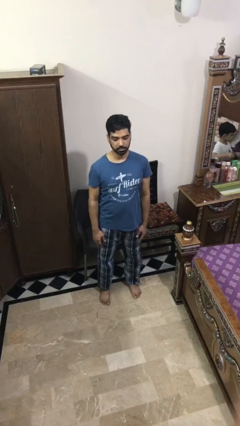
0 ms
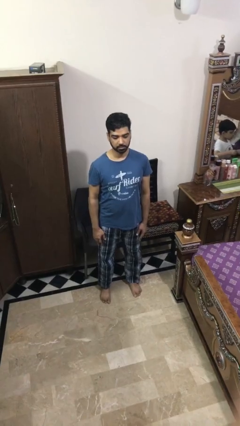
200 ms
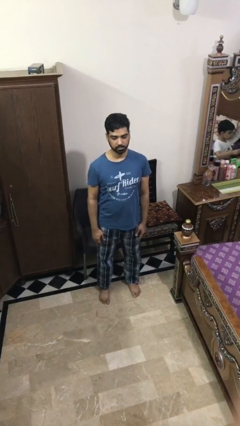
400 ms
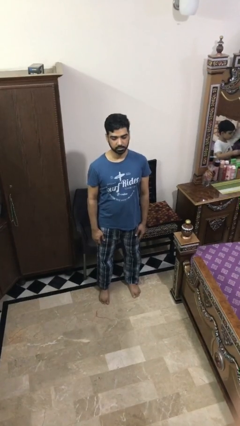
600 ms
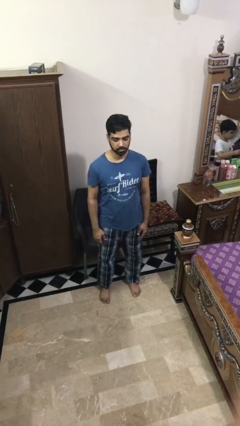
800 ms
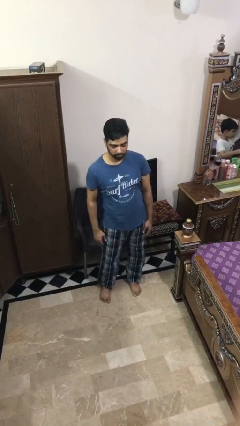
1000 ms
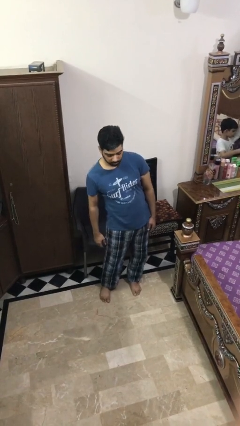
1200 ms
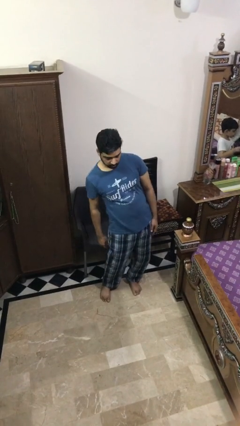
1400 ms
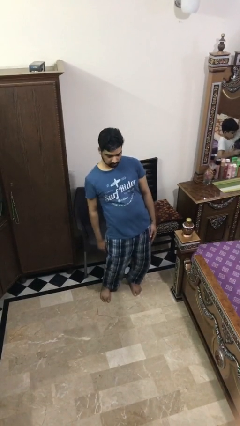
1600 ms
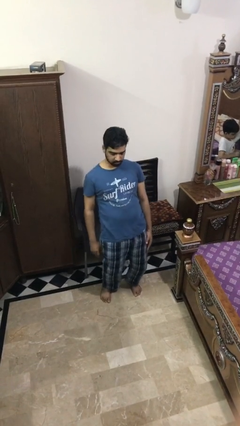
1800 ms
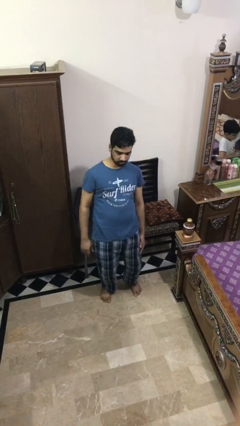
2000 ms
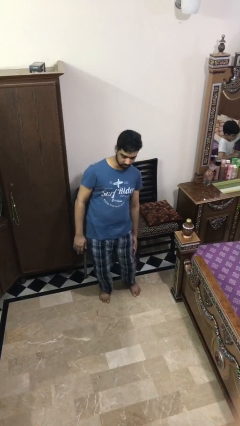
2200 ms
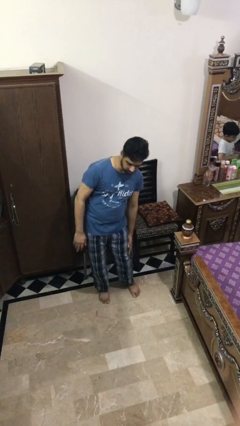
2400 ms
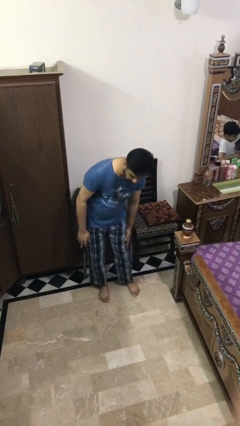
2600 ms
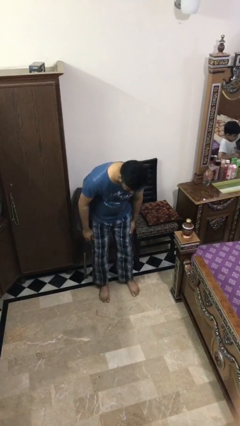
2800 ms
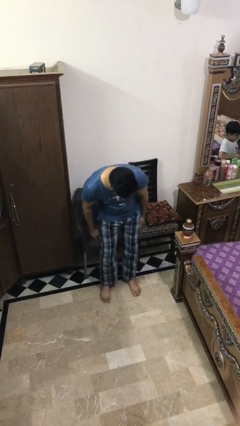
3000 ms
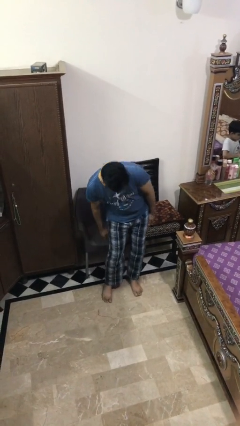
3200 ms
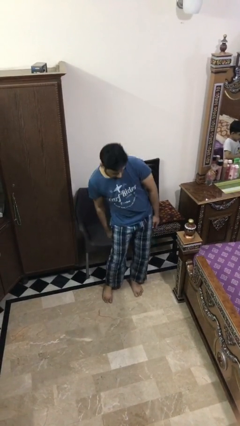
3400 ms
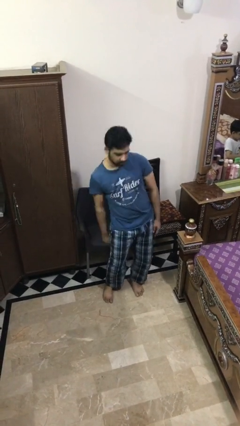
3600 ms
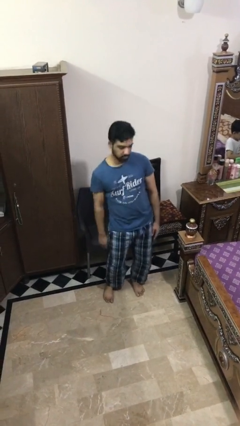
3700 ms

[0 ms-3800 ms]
person wiggles hips

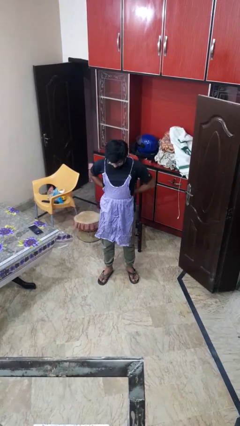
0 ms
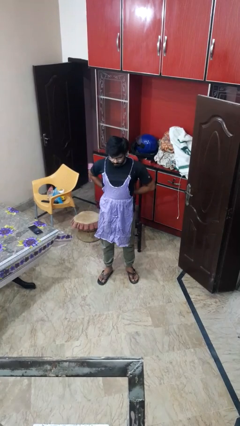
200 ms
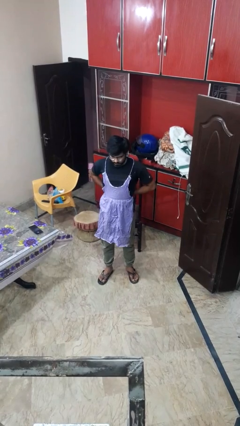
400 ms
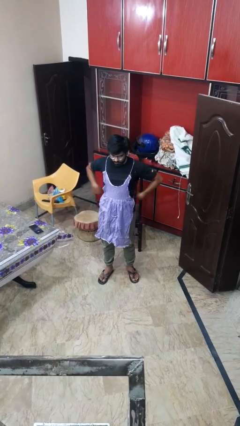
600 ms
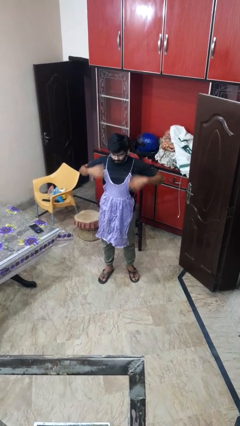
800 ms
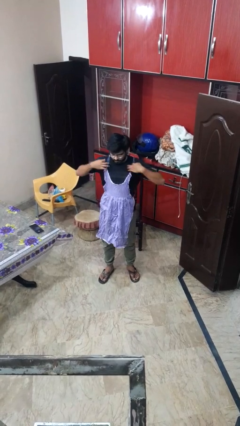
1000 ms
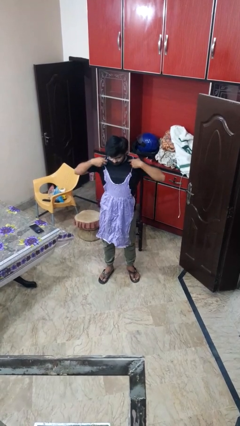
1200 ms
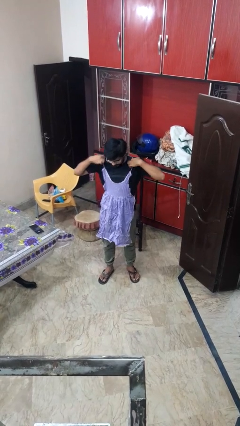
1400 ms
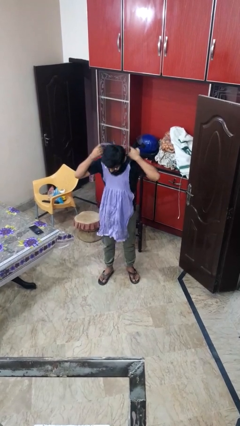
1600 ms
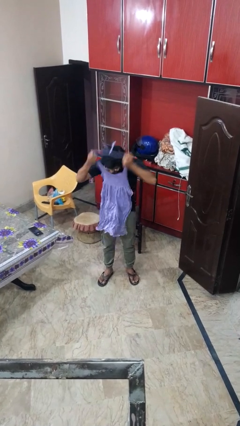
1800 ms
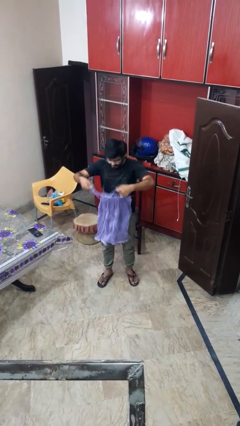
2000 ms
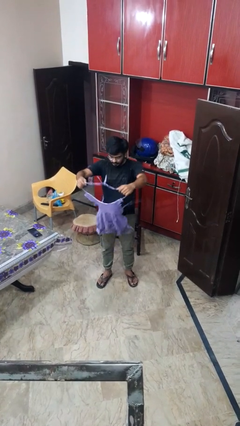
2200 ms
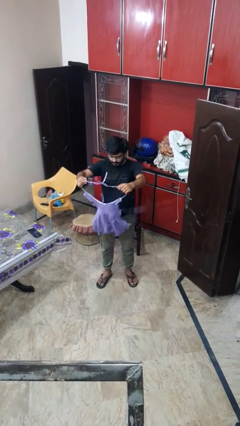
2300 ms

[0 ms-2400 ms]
person takes off apron

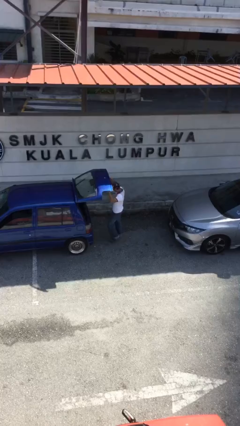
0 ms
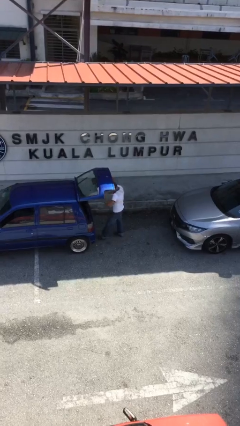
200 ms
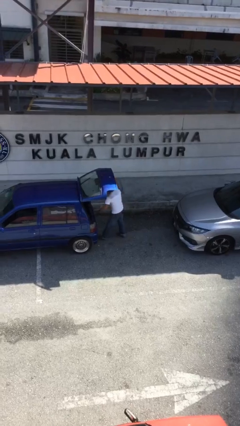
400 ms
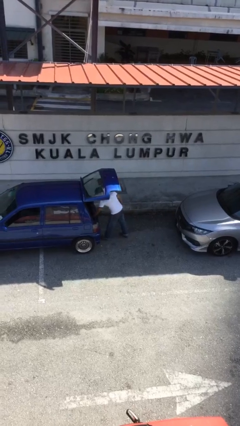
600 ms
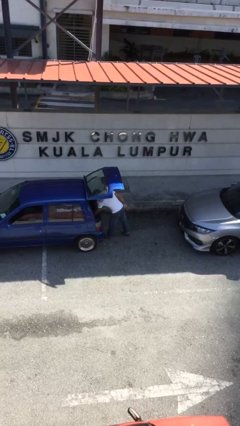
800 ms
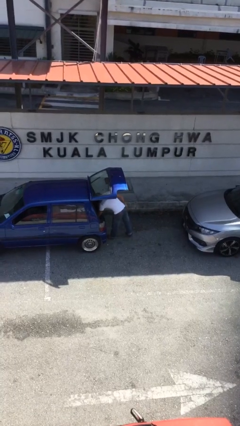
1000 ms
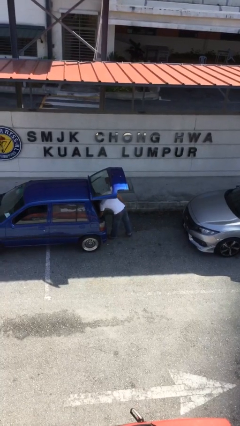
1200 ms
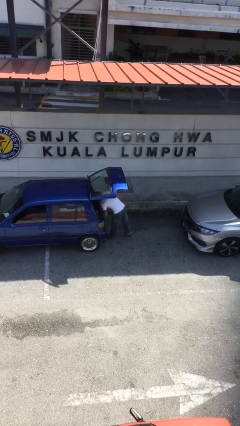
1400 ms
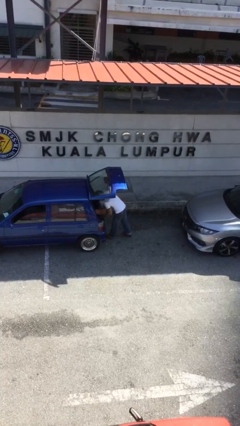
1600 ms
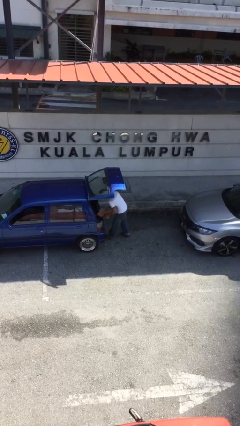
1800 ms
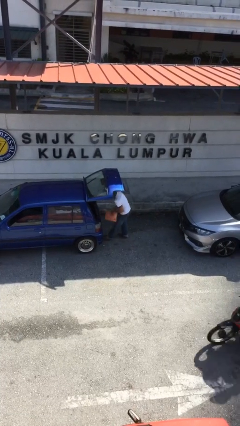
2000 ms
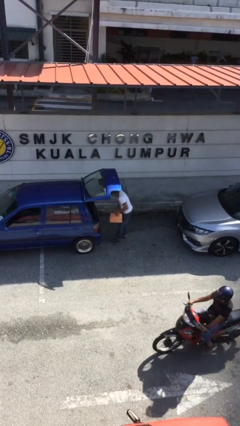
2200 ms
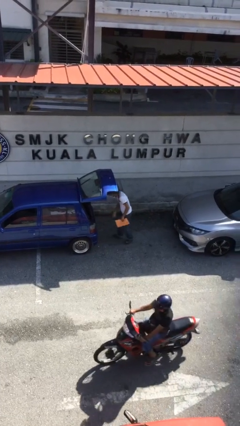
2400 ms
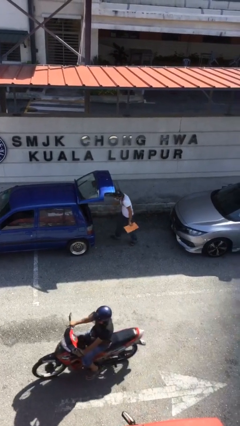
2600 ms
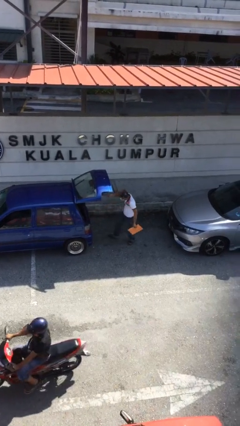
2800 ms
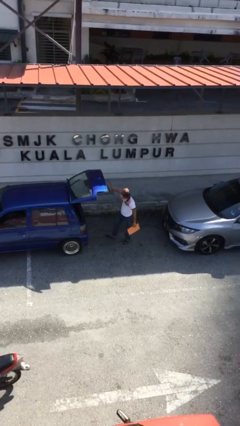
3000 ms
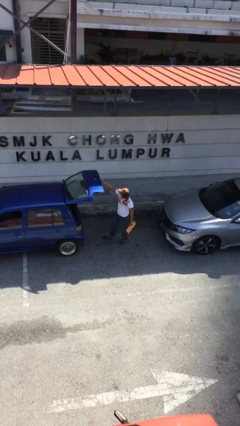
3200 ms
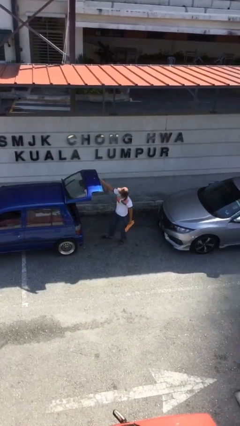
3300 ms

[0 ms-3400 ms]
person unloads car

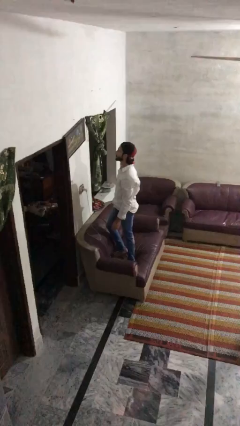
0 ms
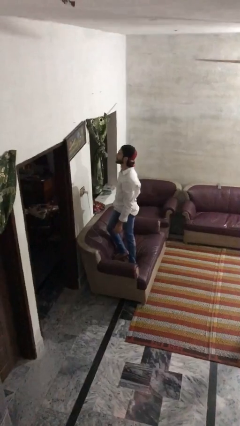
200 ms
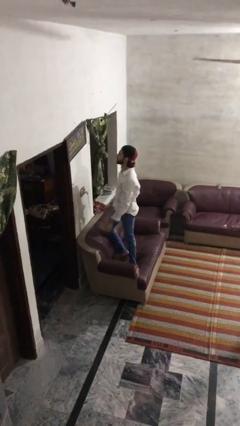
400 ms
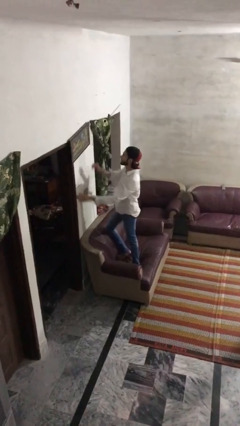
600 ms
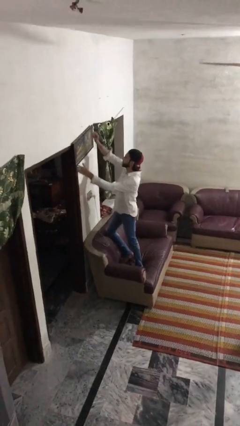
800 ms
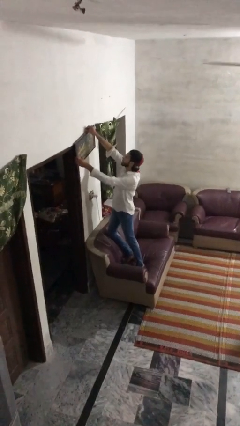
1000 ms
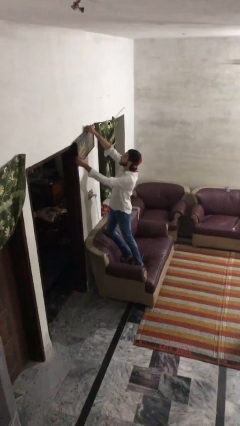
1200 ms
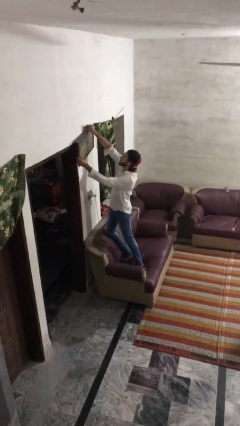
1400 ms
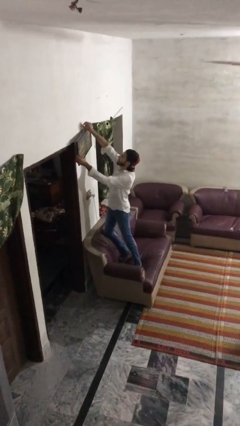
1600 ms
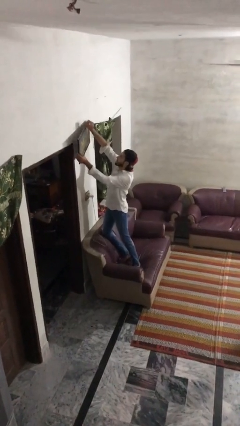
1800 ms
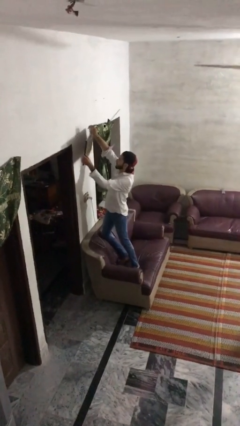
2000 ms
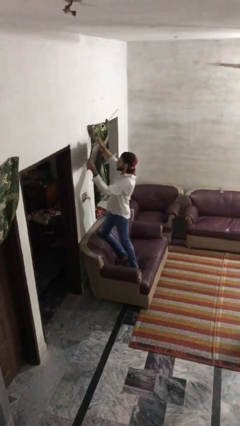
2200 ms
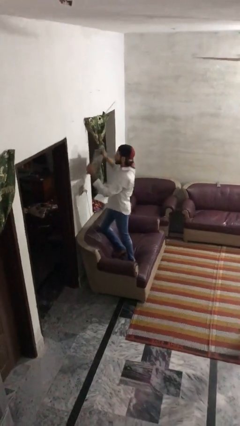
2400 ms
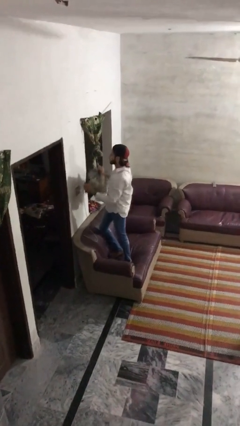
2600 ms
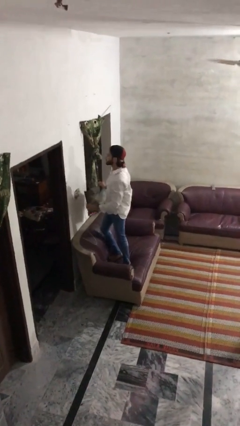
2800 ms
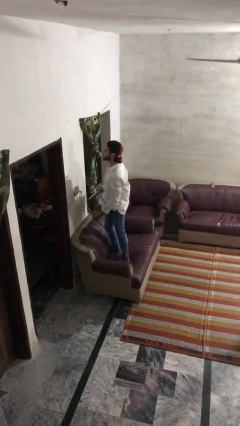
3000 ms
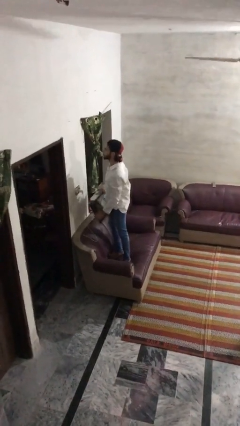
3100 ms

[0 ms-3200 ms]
person takes down picture frame

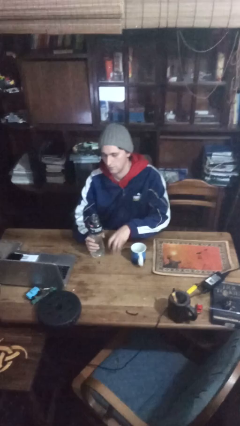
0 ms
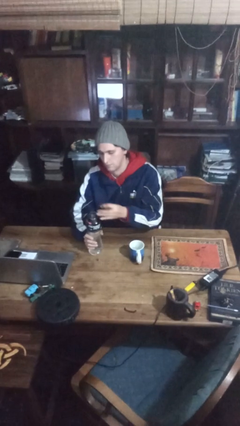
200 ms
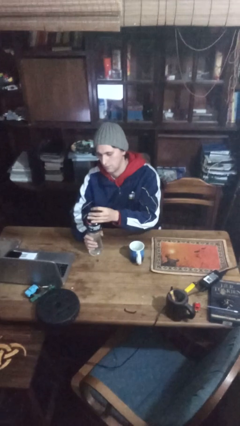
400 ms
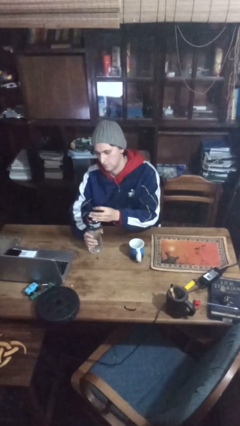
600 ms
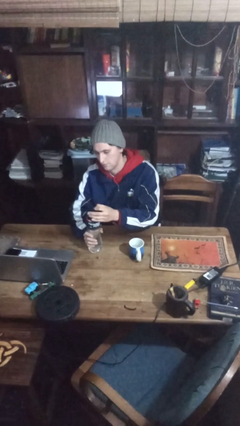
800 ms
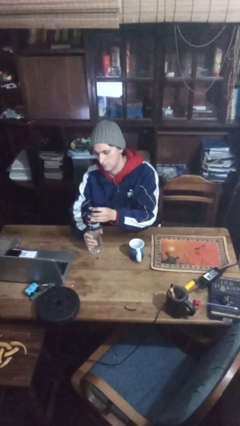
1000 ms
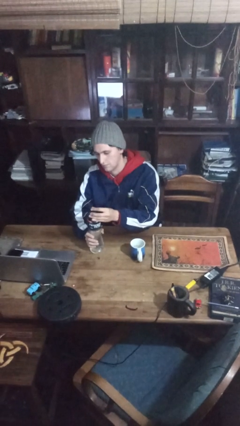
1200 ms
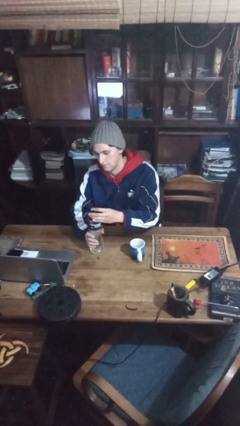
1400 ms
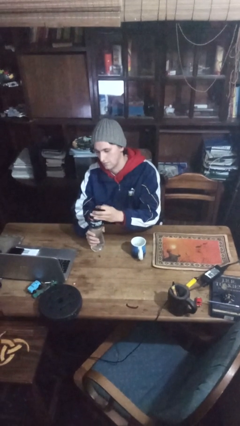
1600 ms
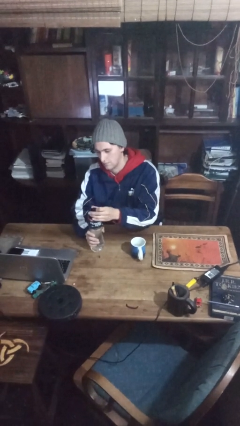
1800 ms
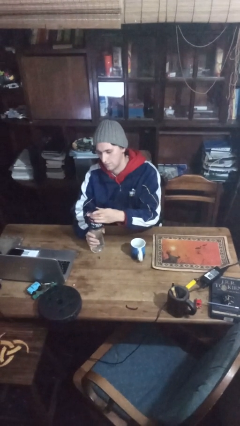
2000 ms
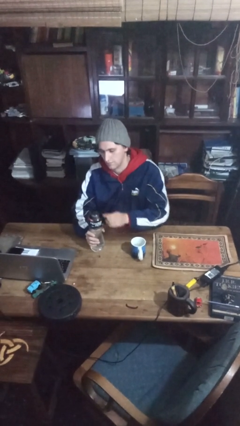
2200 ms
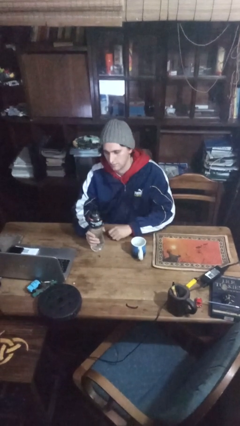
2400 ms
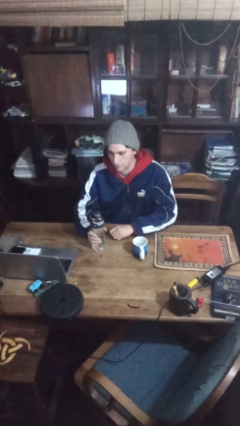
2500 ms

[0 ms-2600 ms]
person screws lid to bottle

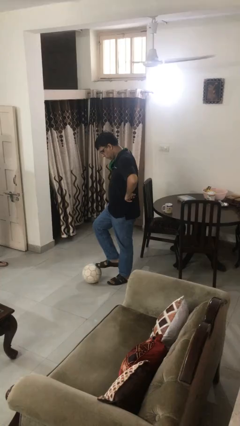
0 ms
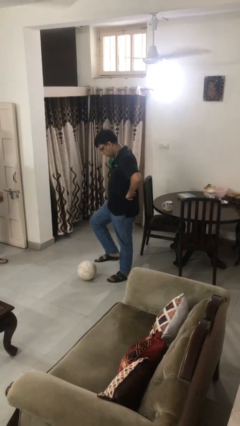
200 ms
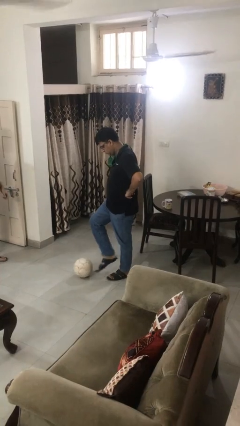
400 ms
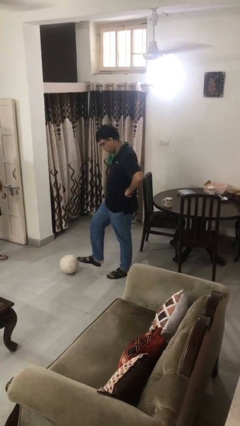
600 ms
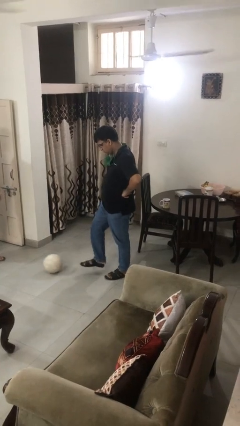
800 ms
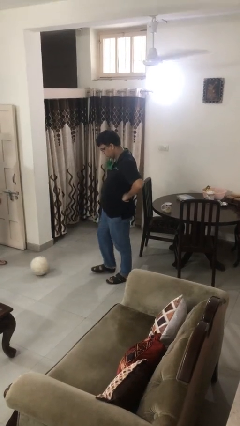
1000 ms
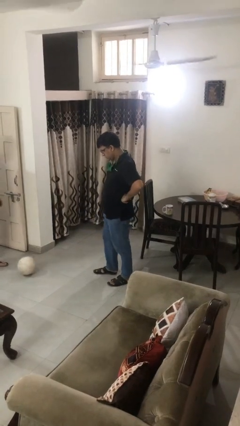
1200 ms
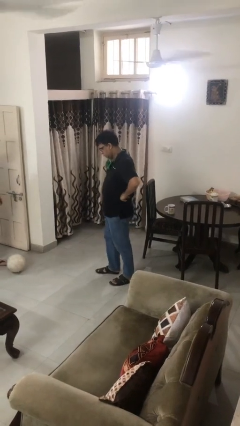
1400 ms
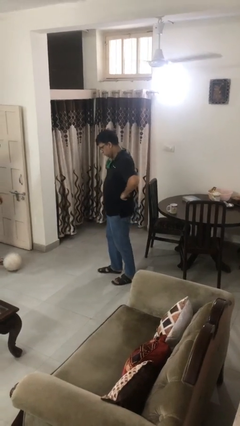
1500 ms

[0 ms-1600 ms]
person kicks object to person

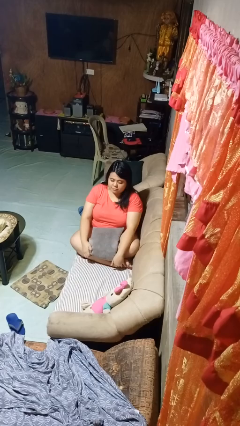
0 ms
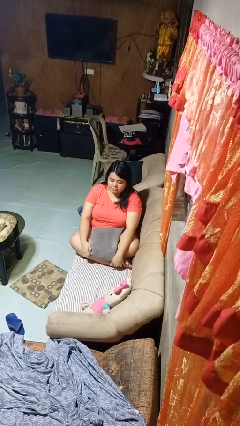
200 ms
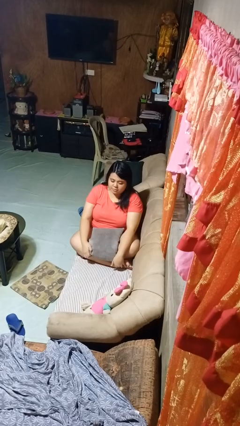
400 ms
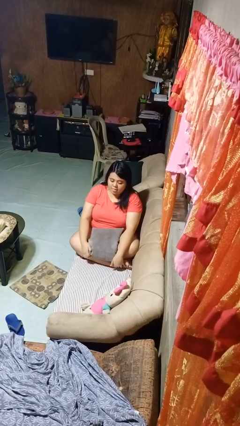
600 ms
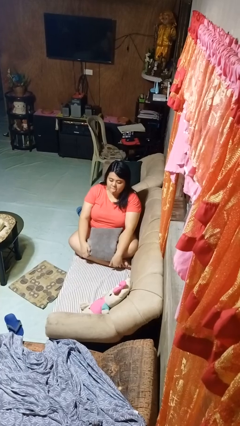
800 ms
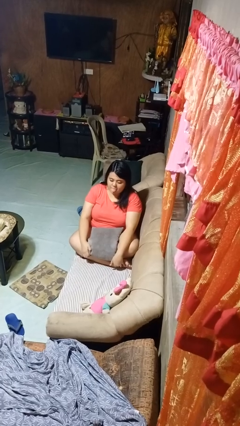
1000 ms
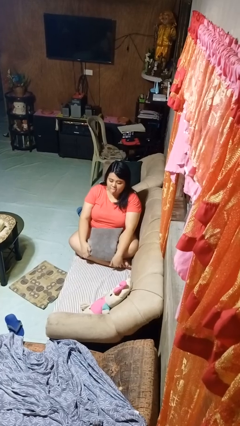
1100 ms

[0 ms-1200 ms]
person sticks out tongue
